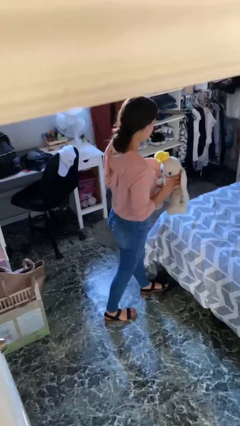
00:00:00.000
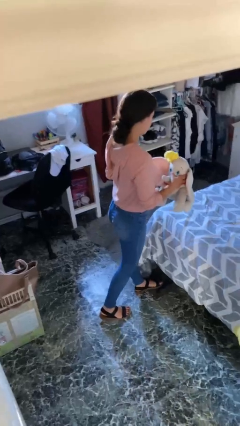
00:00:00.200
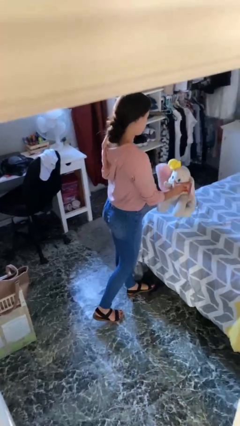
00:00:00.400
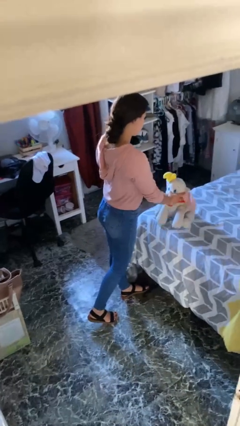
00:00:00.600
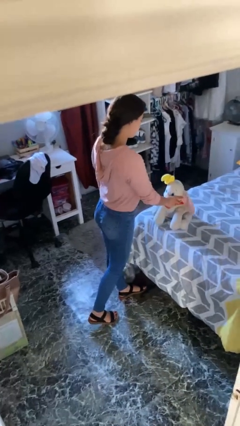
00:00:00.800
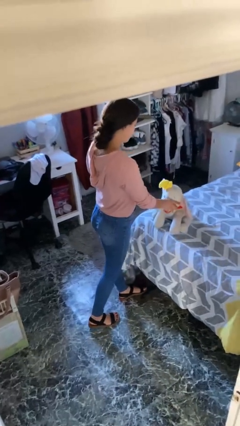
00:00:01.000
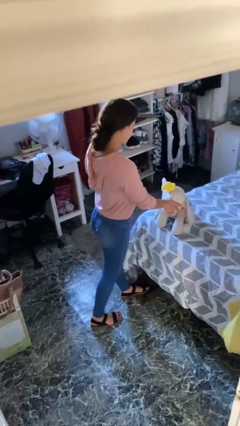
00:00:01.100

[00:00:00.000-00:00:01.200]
person puts down object on bed

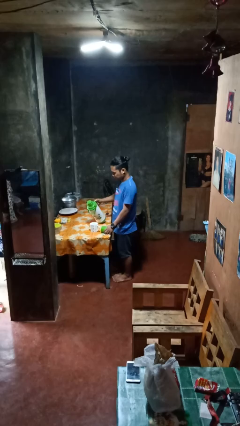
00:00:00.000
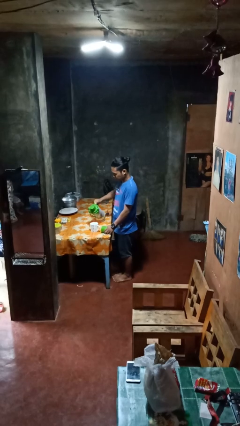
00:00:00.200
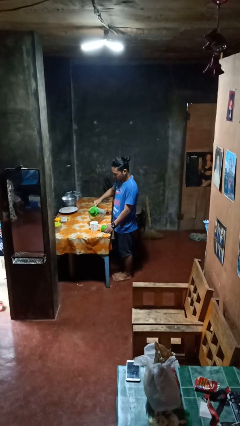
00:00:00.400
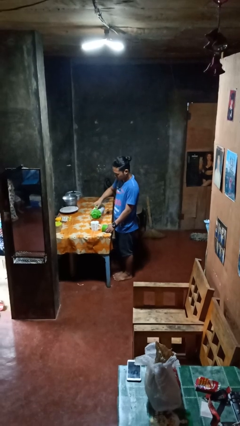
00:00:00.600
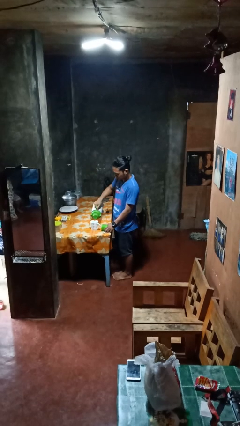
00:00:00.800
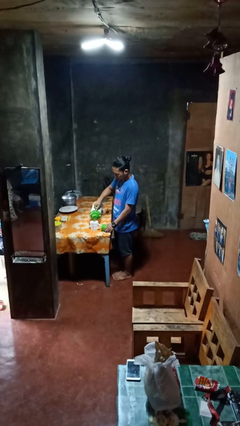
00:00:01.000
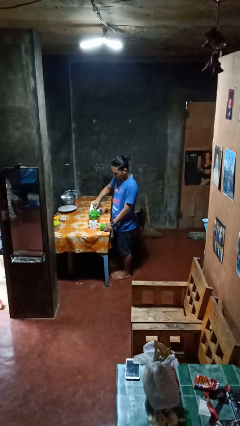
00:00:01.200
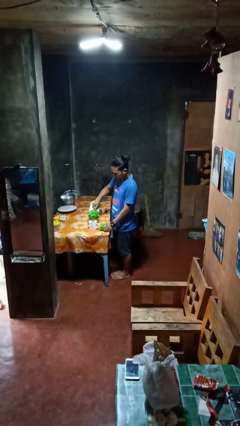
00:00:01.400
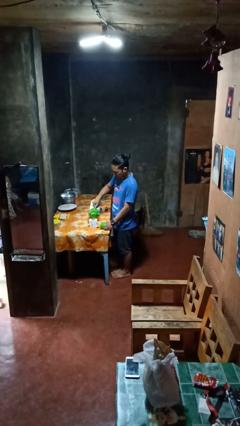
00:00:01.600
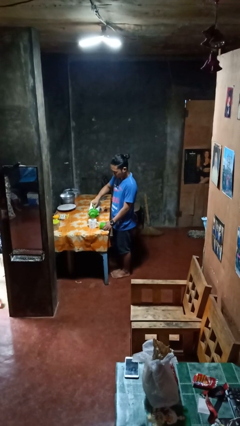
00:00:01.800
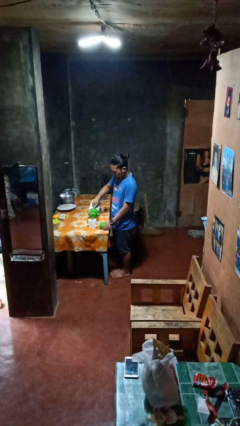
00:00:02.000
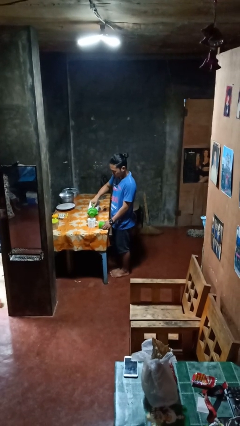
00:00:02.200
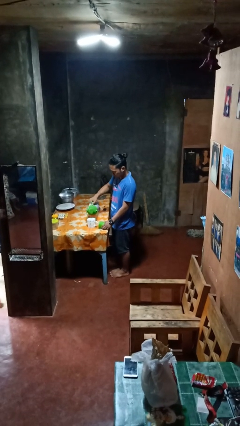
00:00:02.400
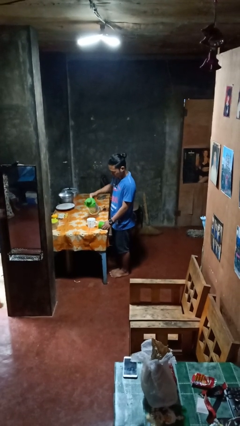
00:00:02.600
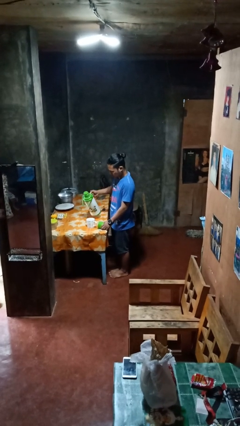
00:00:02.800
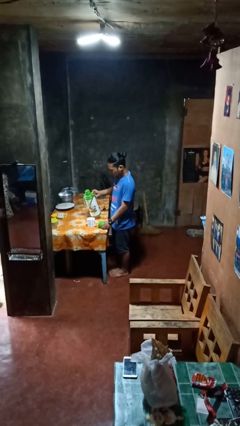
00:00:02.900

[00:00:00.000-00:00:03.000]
person pours coffee into mug

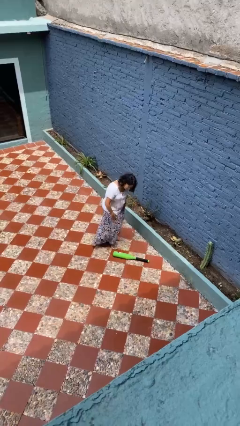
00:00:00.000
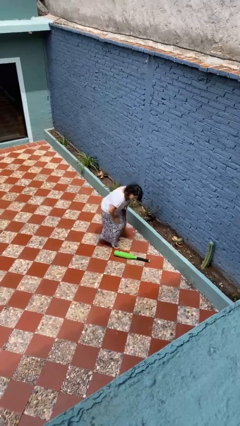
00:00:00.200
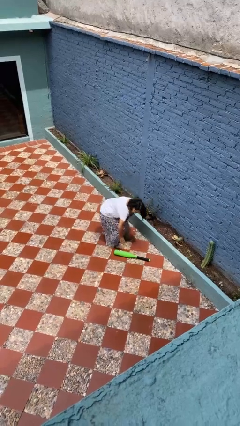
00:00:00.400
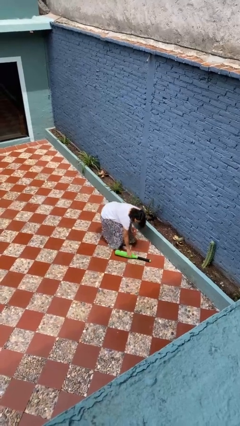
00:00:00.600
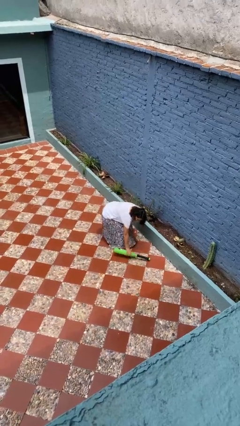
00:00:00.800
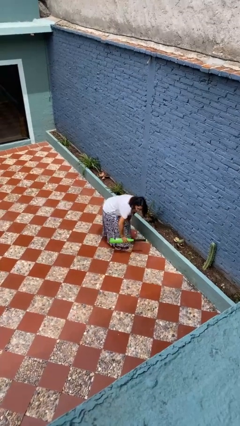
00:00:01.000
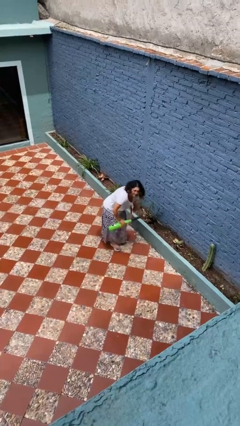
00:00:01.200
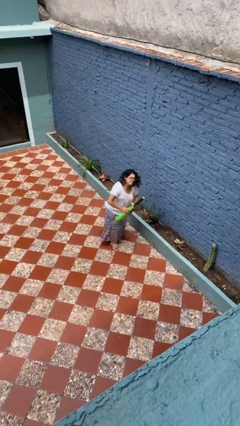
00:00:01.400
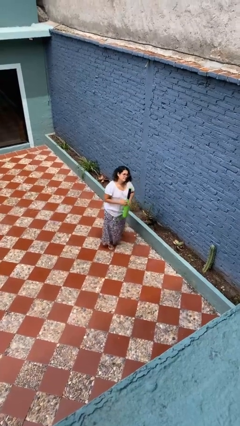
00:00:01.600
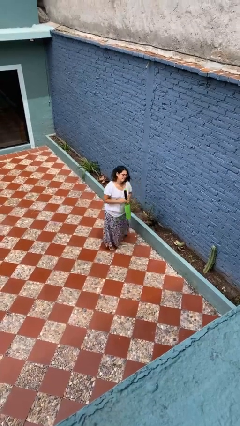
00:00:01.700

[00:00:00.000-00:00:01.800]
person picks up object from floor

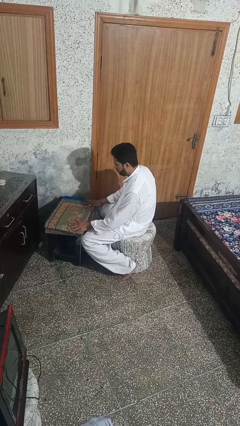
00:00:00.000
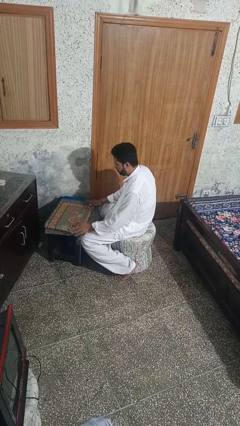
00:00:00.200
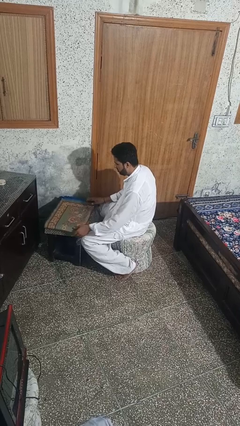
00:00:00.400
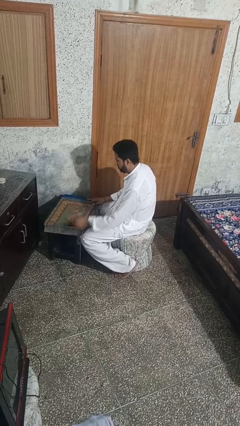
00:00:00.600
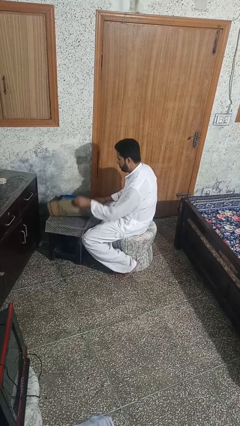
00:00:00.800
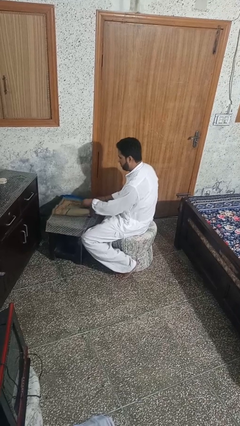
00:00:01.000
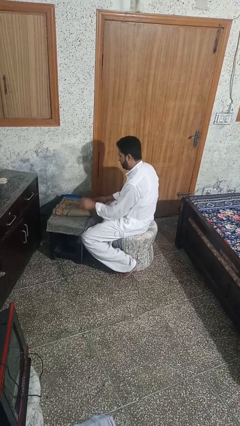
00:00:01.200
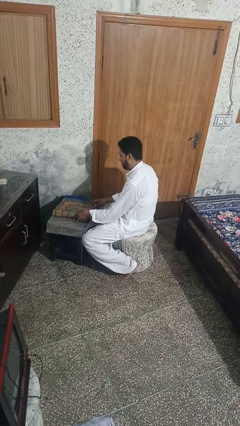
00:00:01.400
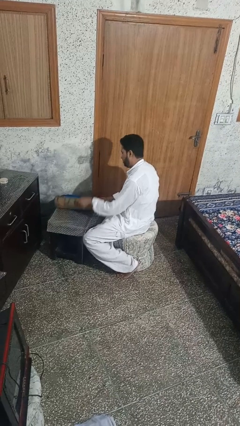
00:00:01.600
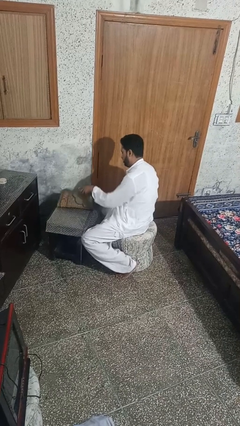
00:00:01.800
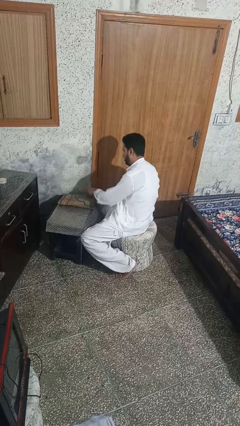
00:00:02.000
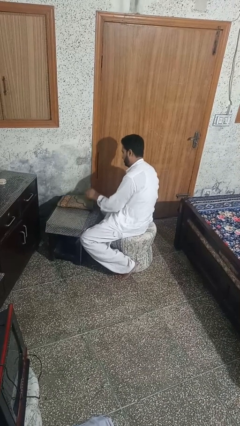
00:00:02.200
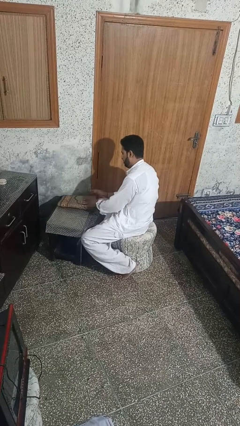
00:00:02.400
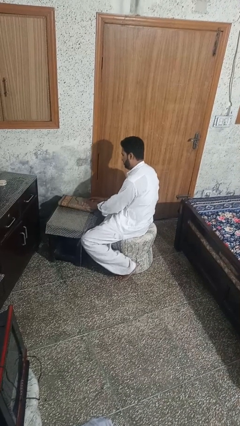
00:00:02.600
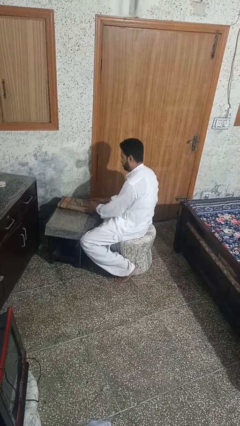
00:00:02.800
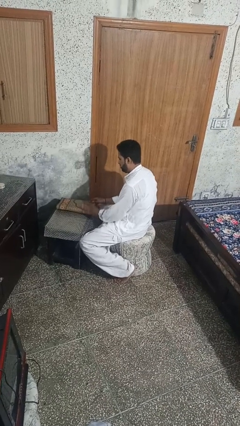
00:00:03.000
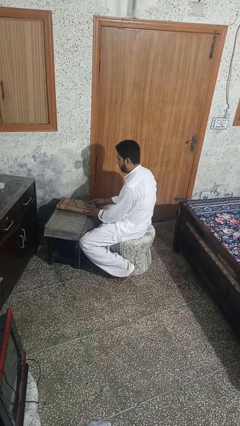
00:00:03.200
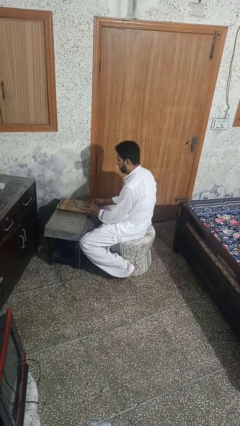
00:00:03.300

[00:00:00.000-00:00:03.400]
person folds tablecloth

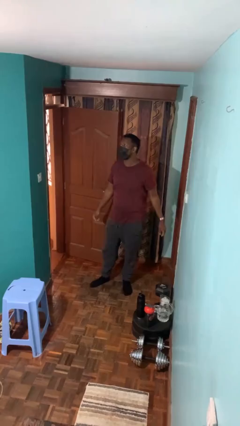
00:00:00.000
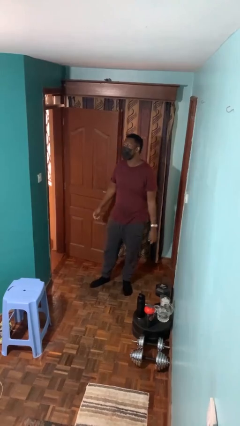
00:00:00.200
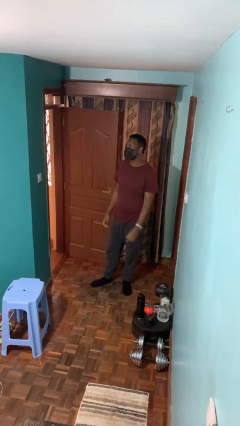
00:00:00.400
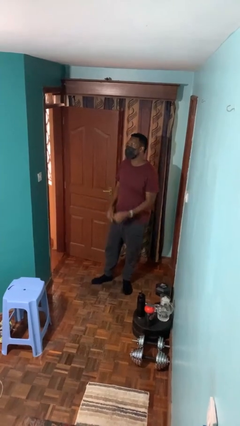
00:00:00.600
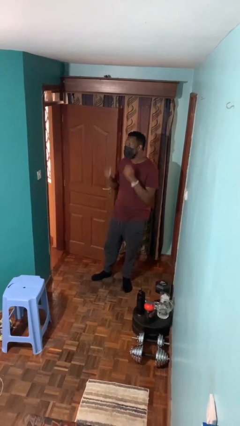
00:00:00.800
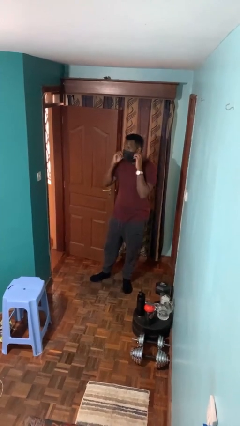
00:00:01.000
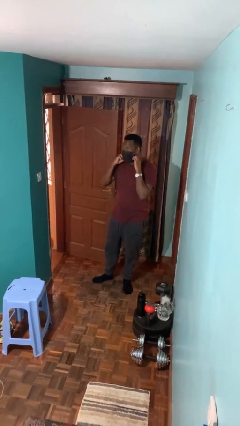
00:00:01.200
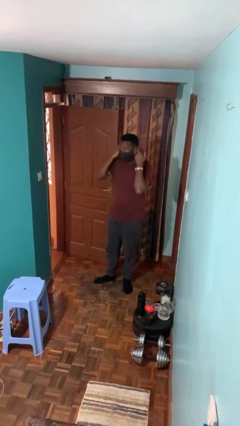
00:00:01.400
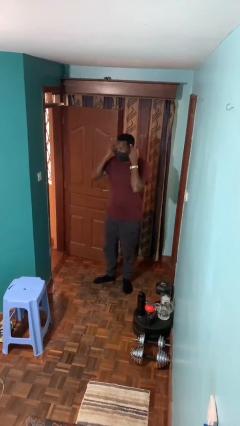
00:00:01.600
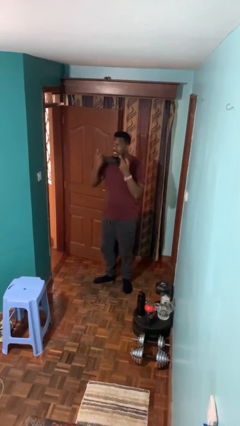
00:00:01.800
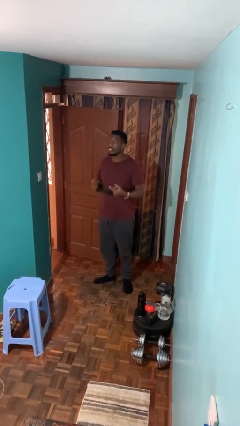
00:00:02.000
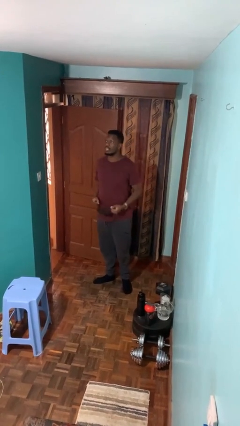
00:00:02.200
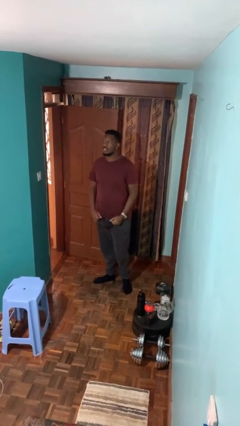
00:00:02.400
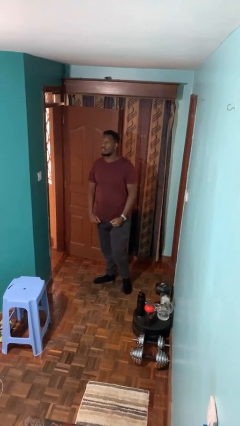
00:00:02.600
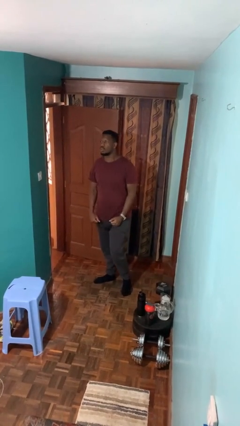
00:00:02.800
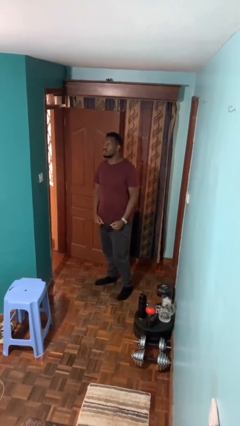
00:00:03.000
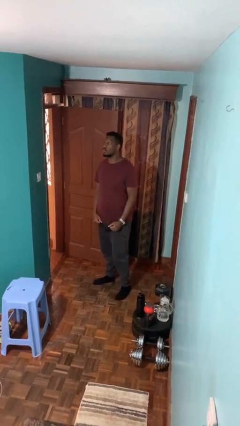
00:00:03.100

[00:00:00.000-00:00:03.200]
person takes off facemask

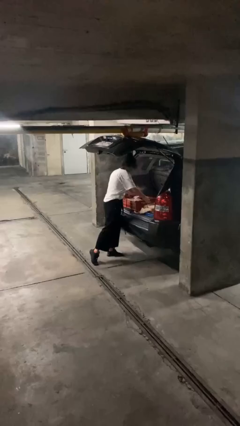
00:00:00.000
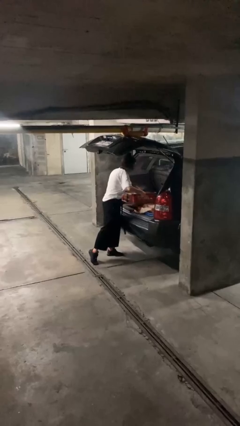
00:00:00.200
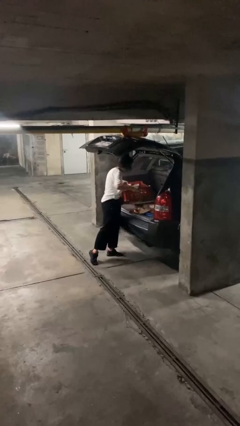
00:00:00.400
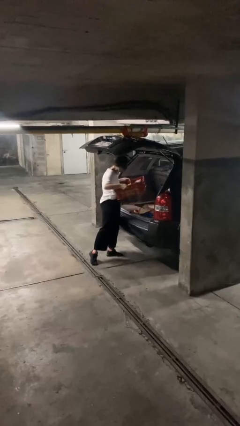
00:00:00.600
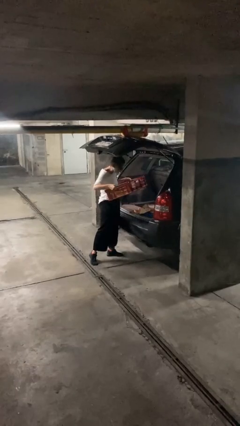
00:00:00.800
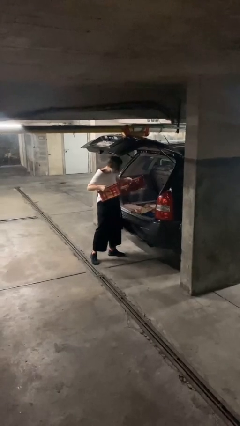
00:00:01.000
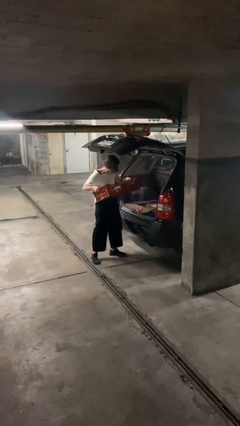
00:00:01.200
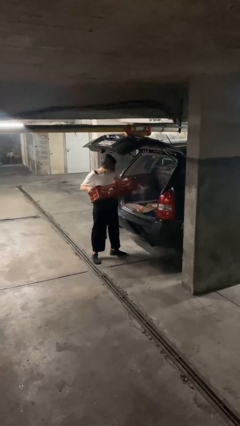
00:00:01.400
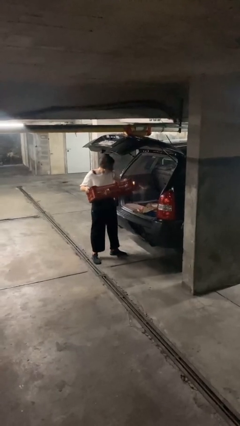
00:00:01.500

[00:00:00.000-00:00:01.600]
person unloads car

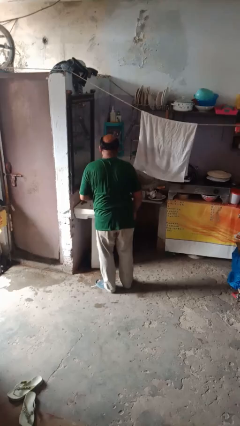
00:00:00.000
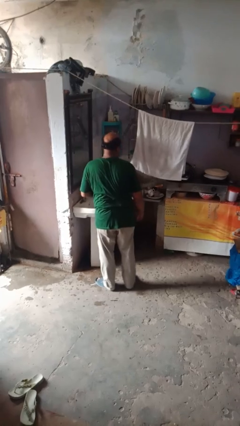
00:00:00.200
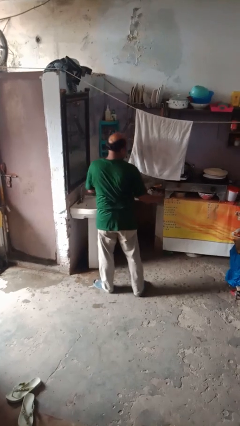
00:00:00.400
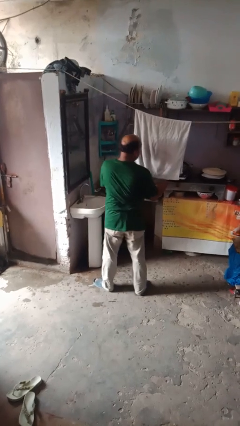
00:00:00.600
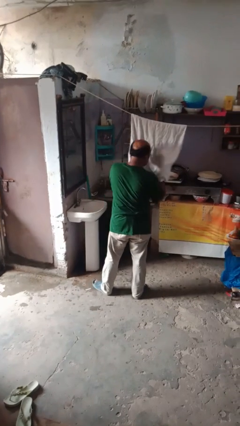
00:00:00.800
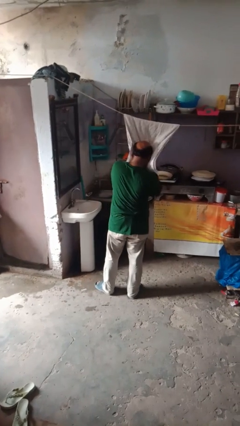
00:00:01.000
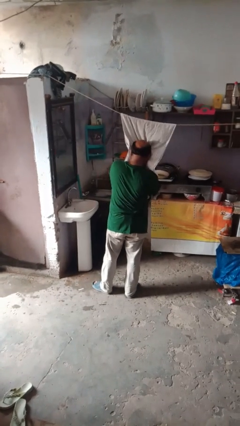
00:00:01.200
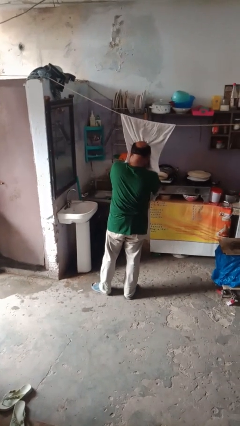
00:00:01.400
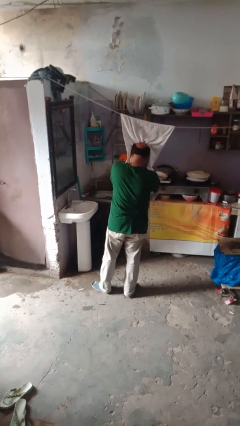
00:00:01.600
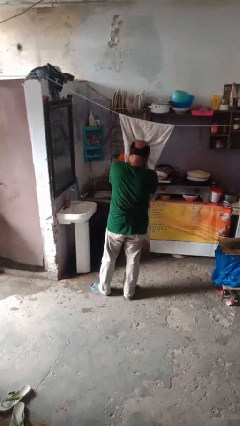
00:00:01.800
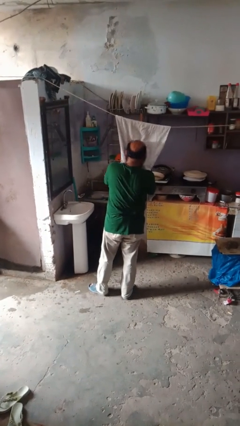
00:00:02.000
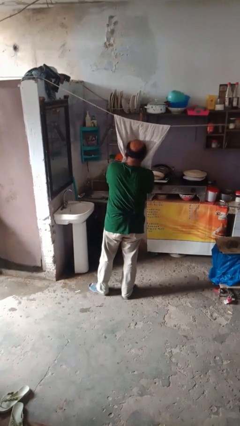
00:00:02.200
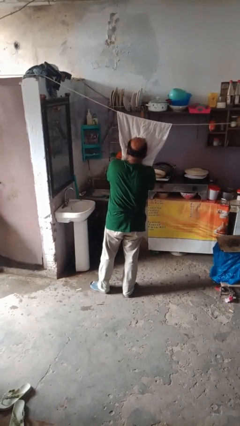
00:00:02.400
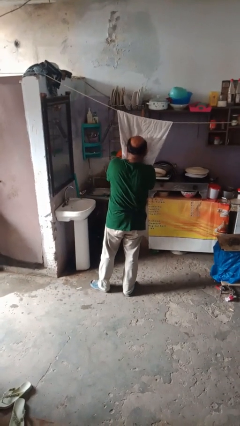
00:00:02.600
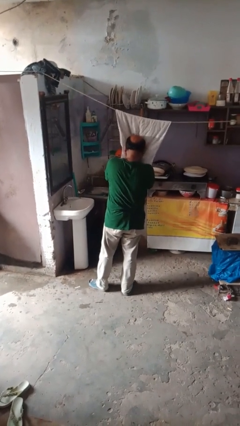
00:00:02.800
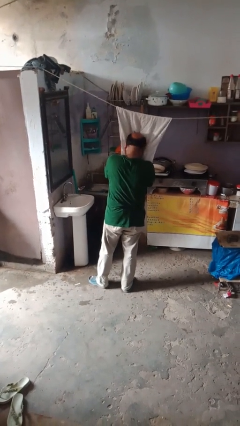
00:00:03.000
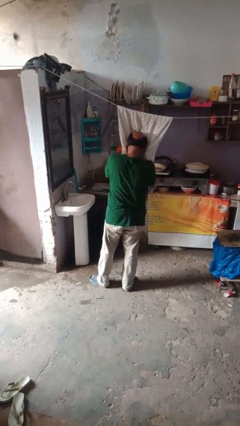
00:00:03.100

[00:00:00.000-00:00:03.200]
person dries face with towel
